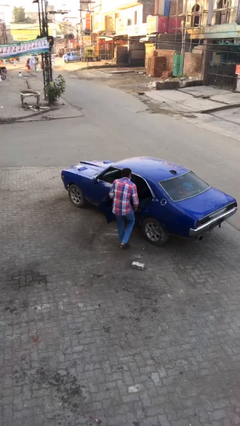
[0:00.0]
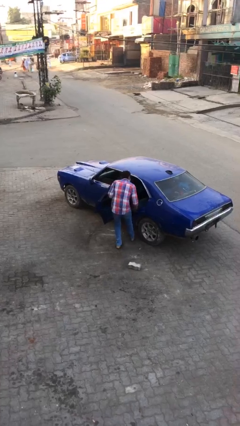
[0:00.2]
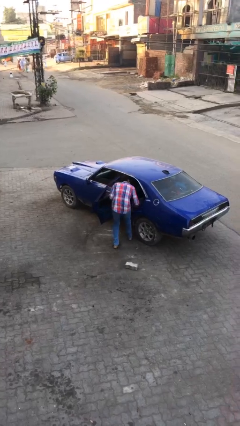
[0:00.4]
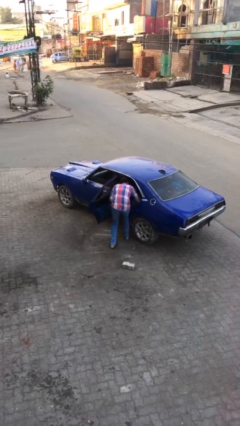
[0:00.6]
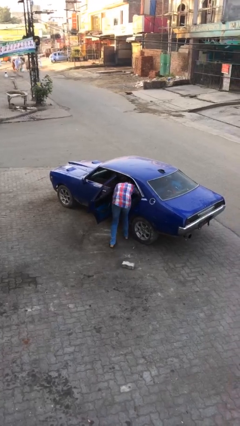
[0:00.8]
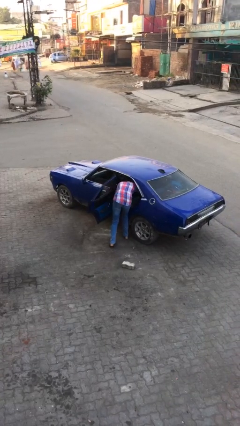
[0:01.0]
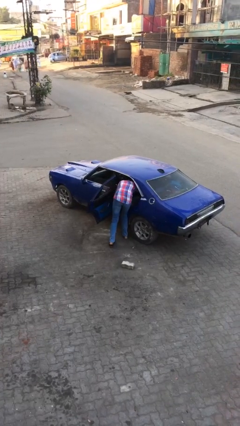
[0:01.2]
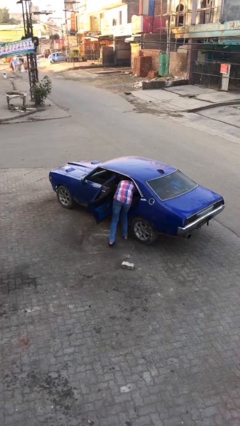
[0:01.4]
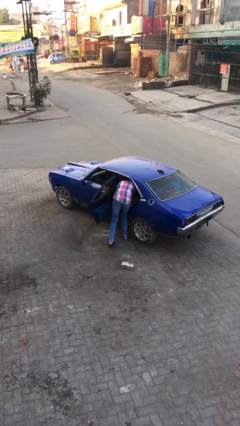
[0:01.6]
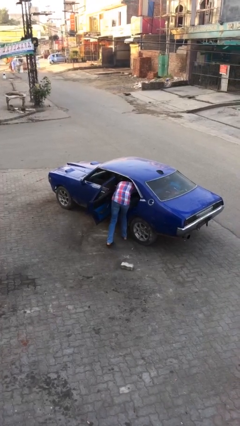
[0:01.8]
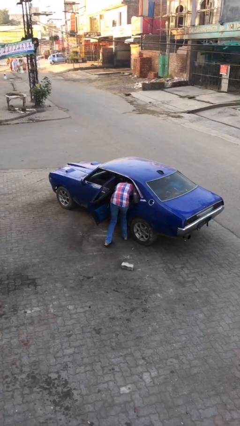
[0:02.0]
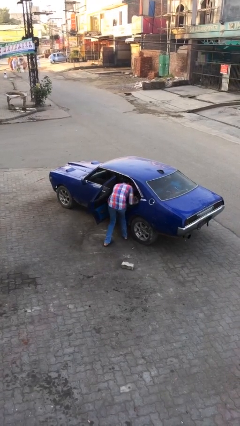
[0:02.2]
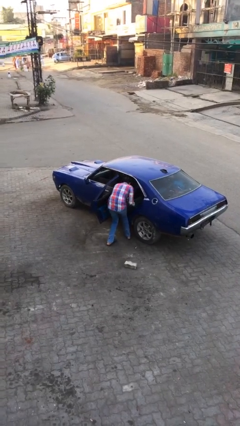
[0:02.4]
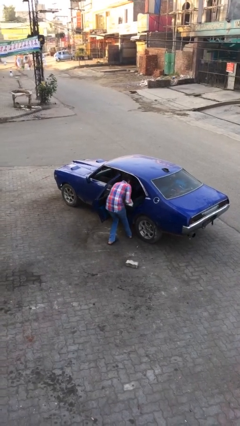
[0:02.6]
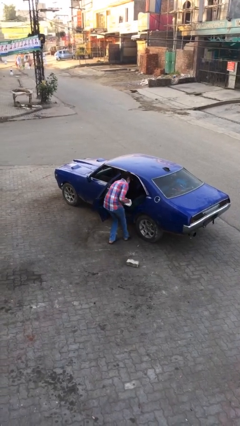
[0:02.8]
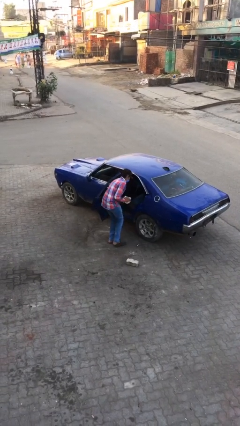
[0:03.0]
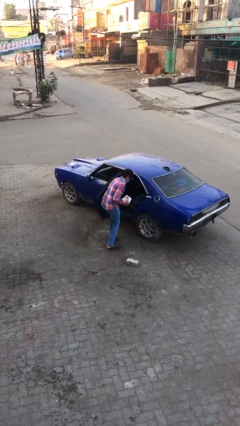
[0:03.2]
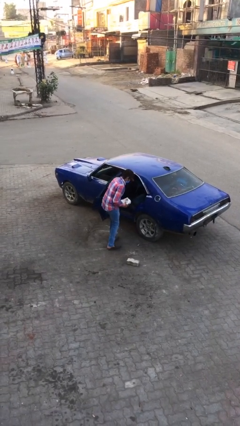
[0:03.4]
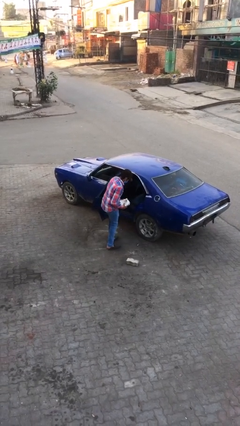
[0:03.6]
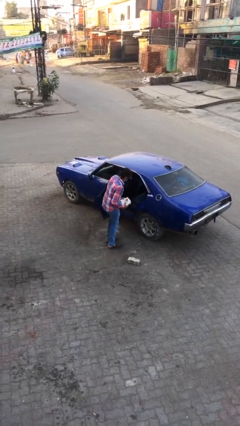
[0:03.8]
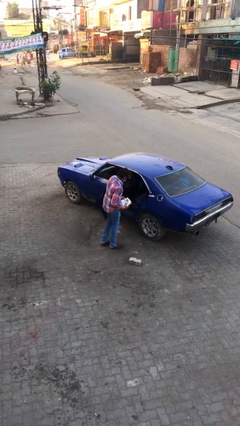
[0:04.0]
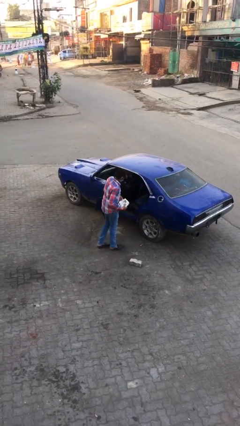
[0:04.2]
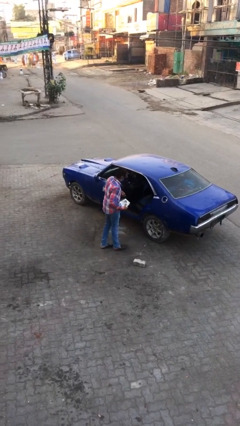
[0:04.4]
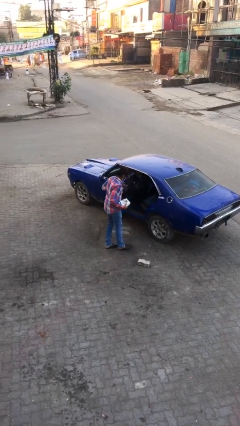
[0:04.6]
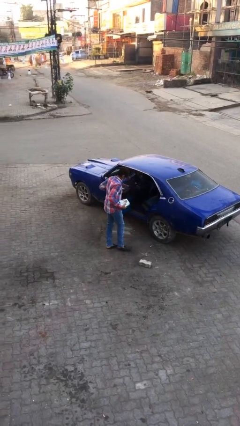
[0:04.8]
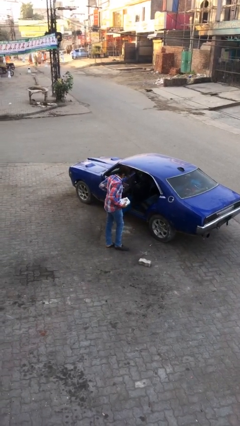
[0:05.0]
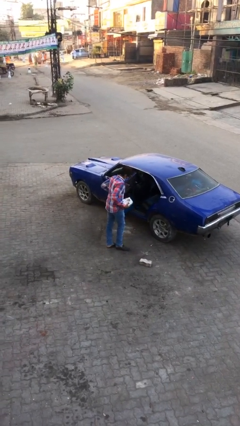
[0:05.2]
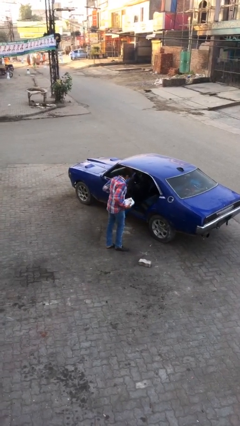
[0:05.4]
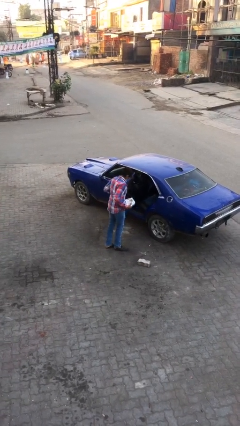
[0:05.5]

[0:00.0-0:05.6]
person unloads car

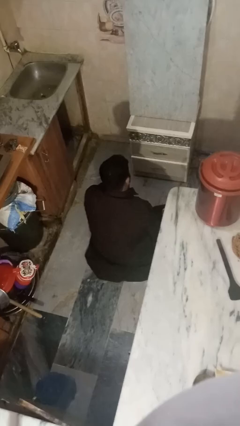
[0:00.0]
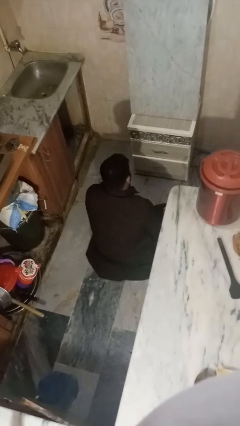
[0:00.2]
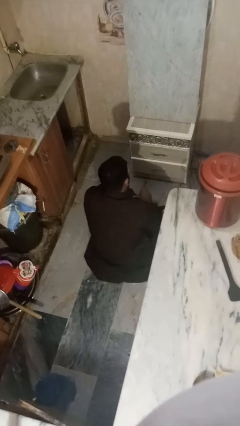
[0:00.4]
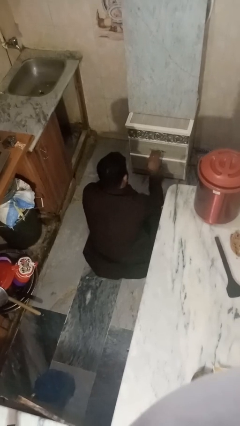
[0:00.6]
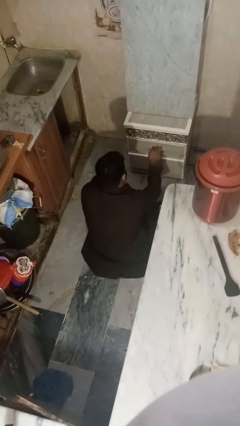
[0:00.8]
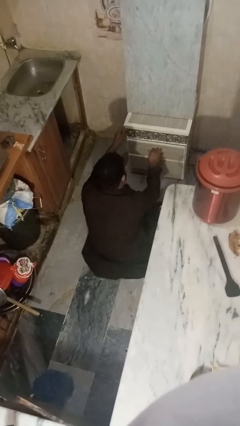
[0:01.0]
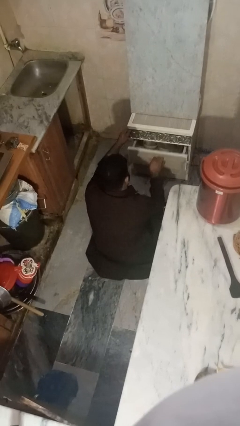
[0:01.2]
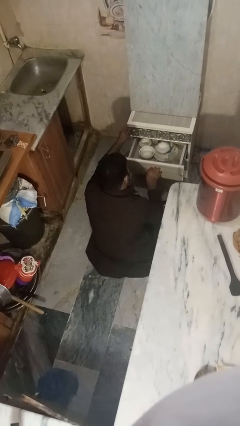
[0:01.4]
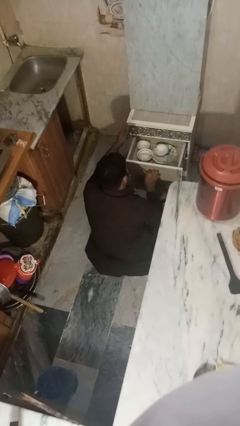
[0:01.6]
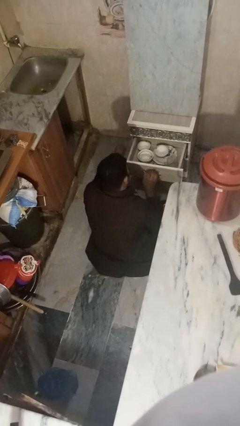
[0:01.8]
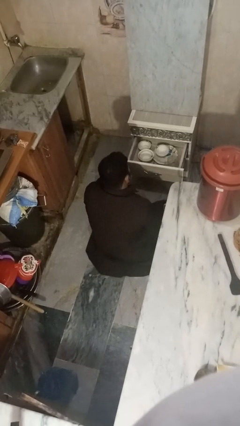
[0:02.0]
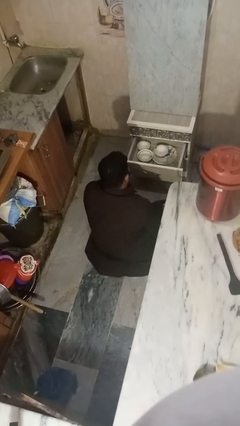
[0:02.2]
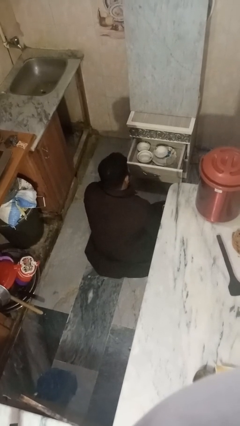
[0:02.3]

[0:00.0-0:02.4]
person opens kitchen drawer

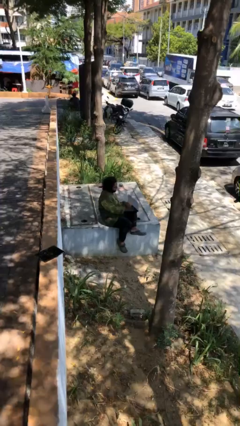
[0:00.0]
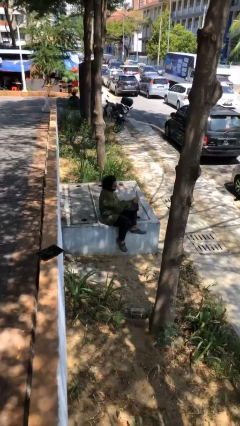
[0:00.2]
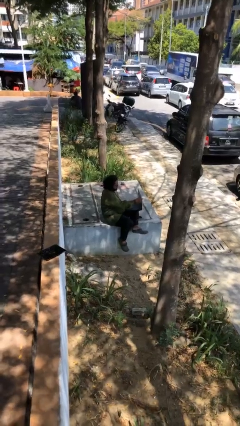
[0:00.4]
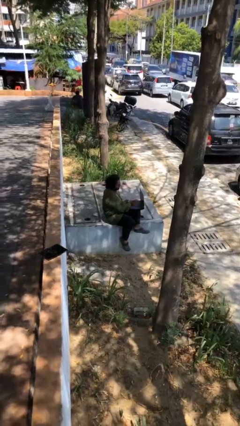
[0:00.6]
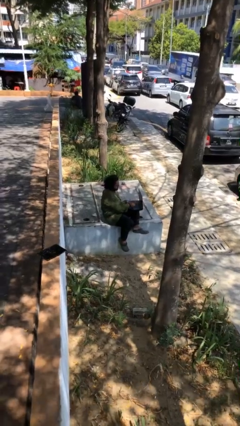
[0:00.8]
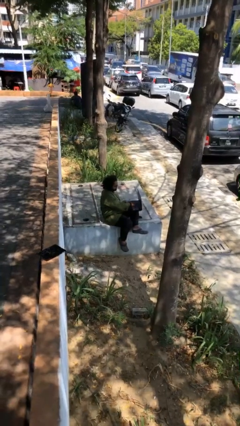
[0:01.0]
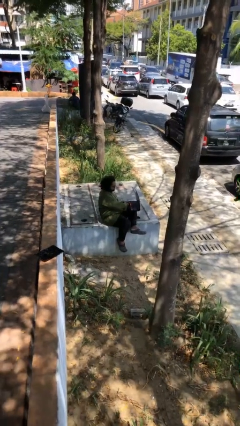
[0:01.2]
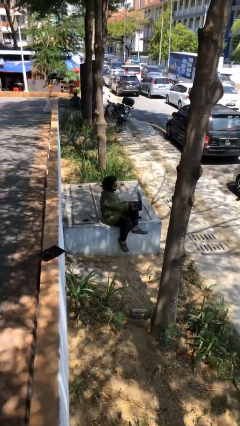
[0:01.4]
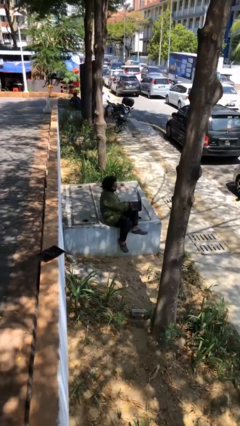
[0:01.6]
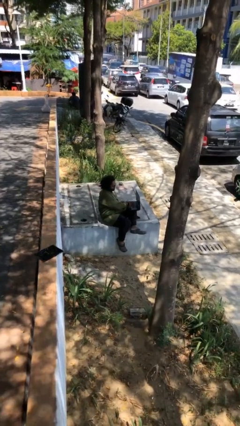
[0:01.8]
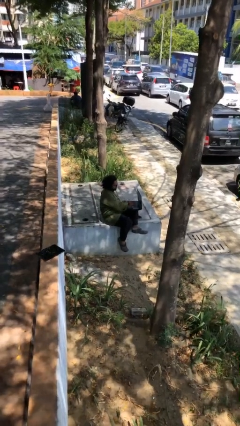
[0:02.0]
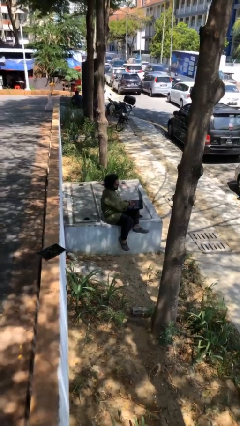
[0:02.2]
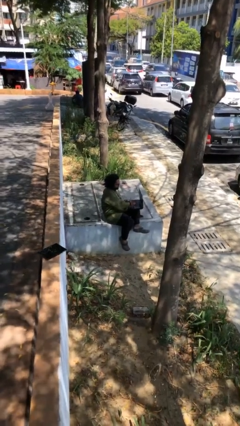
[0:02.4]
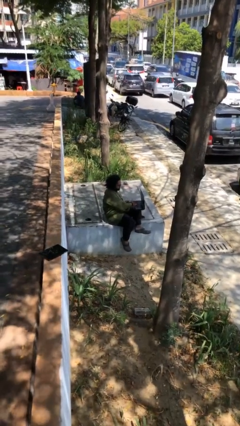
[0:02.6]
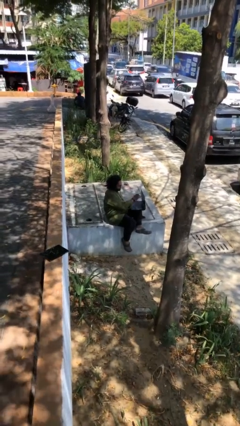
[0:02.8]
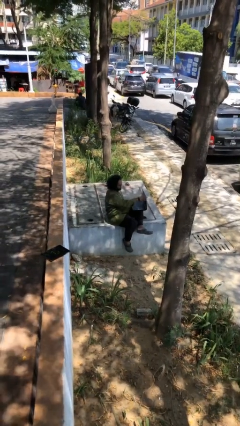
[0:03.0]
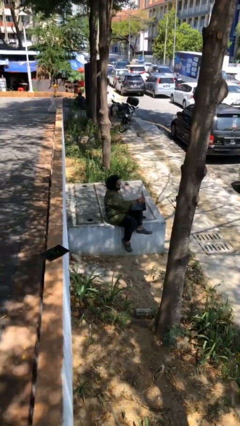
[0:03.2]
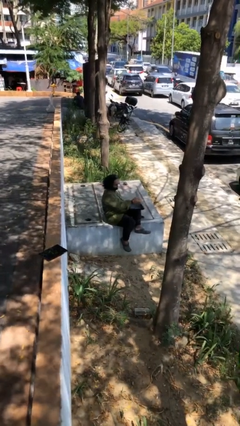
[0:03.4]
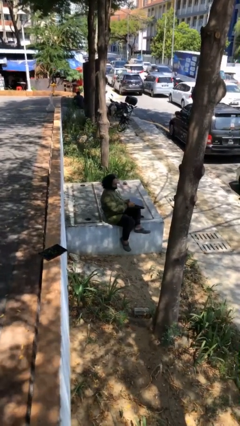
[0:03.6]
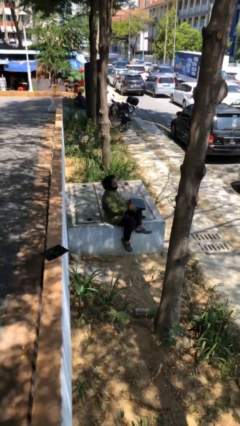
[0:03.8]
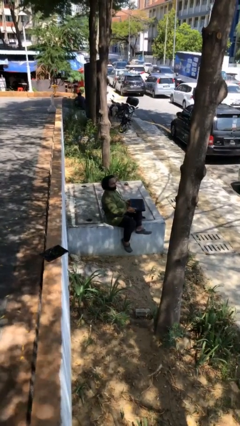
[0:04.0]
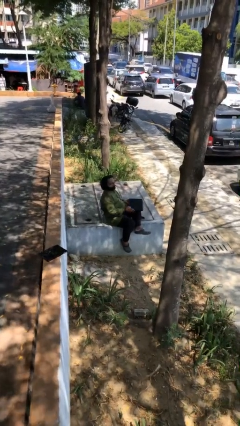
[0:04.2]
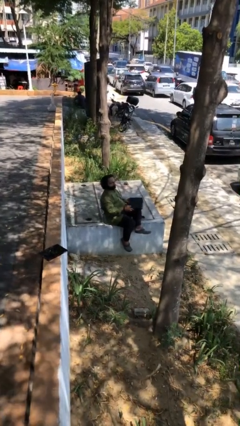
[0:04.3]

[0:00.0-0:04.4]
person interacts with laptop

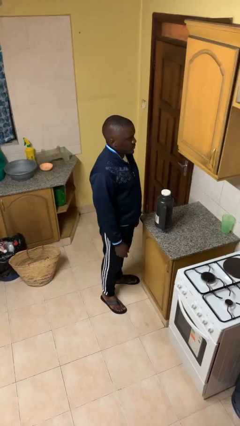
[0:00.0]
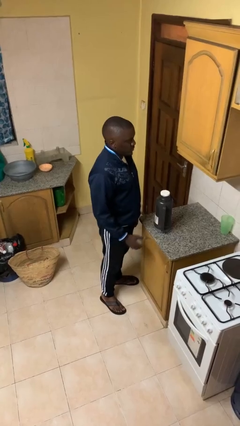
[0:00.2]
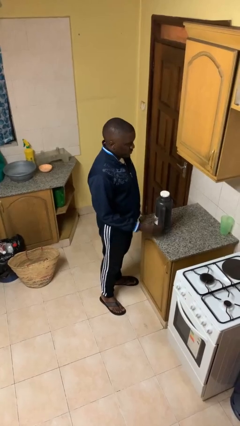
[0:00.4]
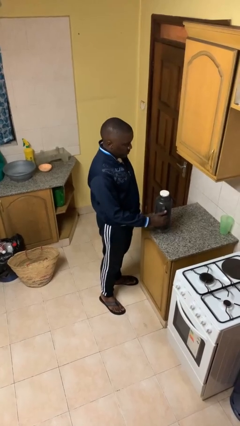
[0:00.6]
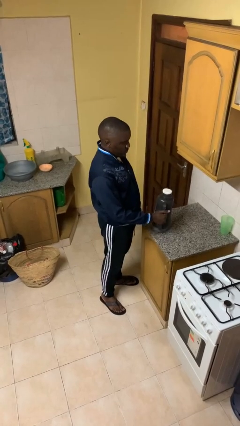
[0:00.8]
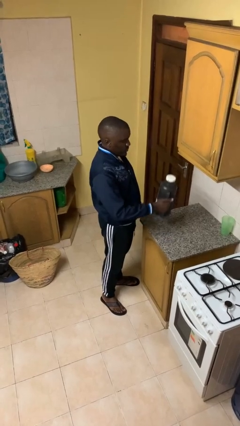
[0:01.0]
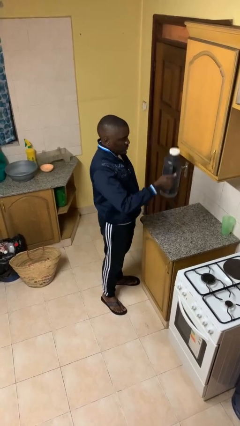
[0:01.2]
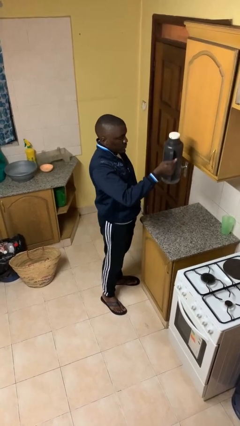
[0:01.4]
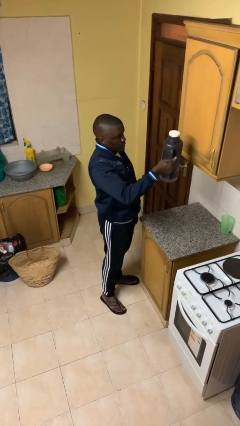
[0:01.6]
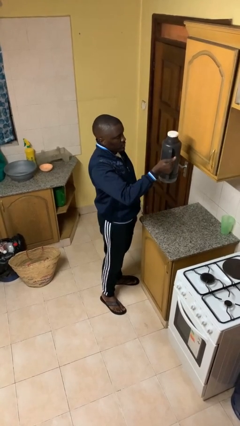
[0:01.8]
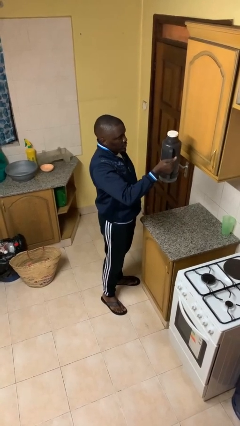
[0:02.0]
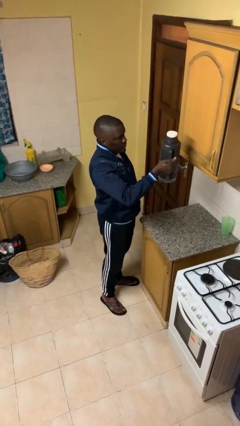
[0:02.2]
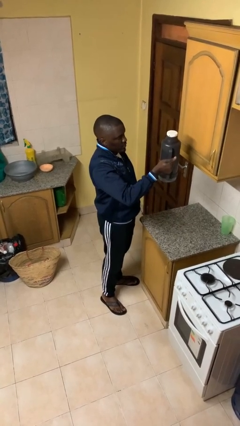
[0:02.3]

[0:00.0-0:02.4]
person picks up object from countertop

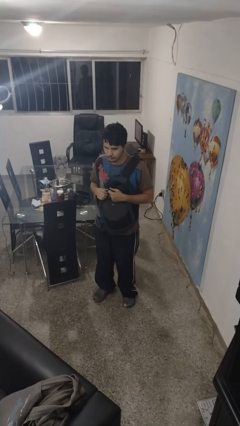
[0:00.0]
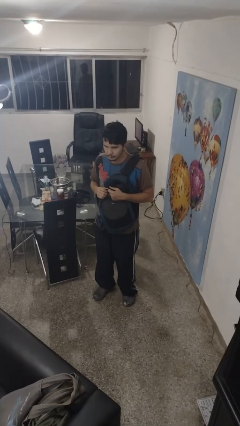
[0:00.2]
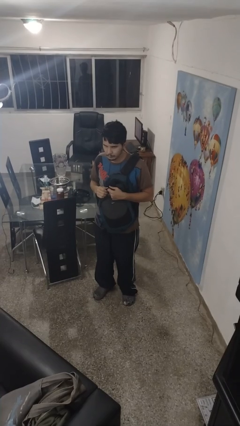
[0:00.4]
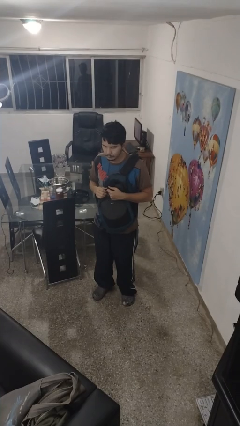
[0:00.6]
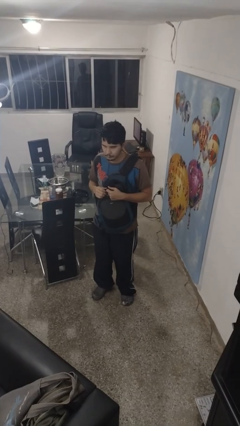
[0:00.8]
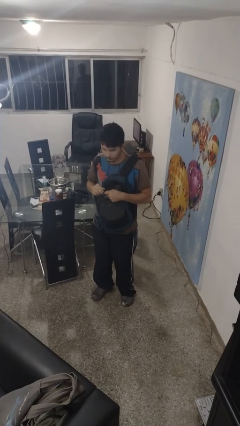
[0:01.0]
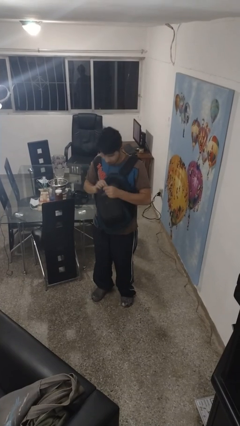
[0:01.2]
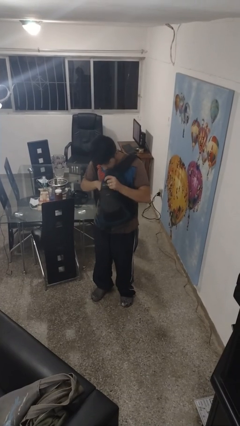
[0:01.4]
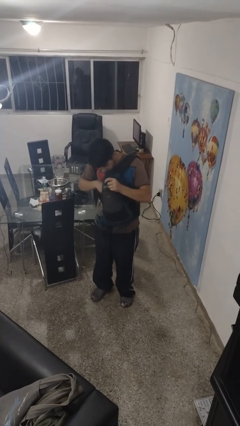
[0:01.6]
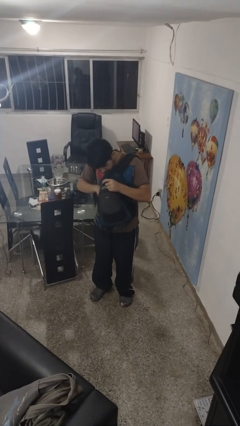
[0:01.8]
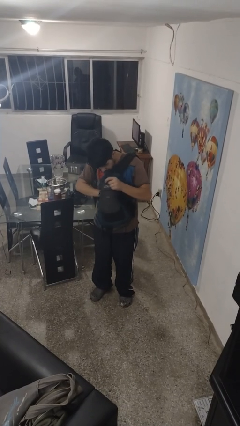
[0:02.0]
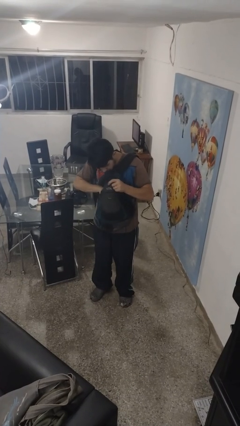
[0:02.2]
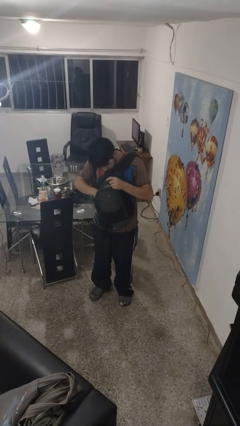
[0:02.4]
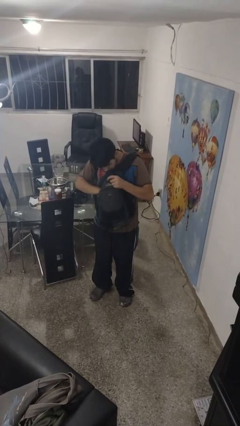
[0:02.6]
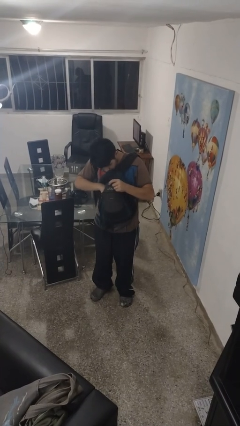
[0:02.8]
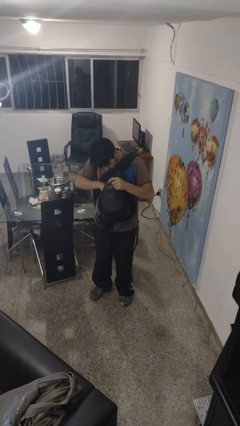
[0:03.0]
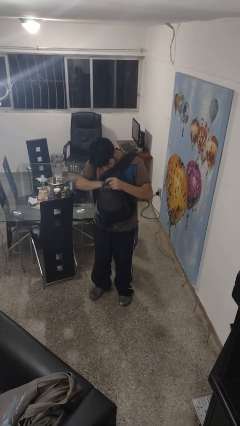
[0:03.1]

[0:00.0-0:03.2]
person searches in backpack
